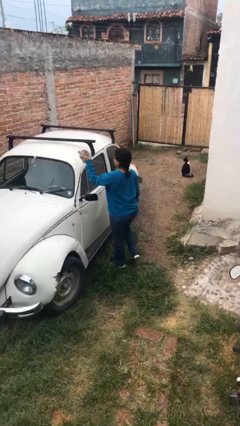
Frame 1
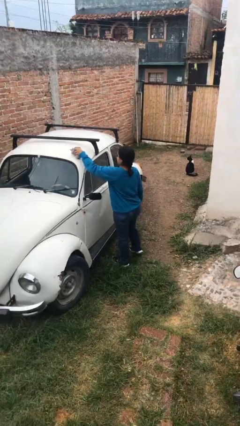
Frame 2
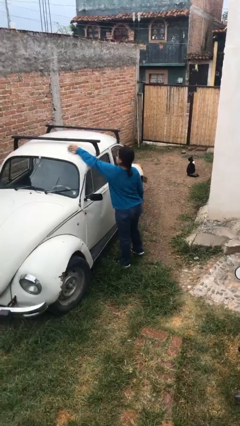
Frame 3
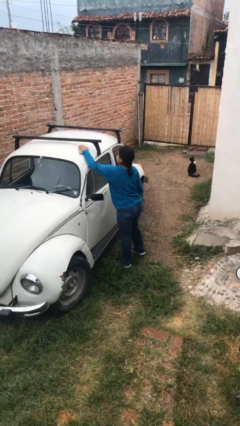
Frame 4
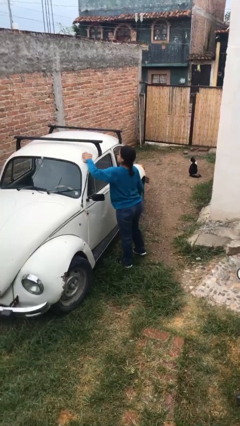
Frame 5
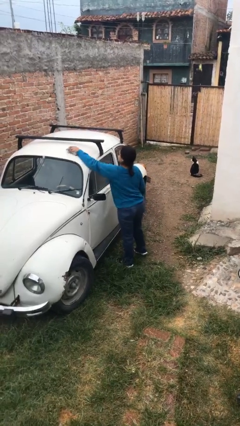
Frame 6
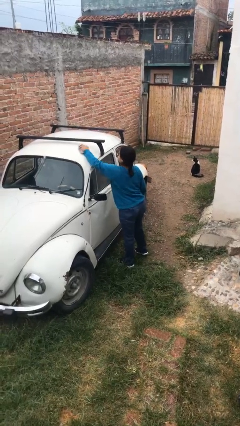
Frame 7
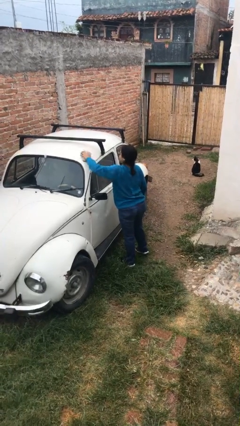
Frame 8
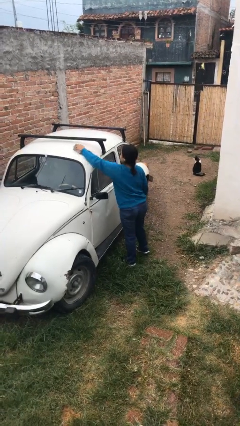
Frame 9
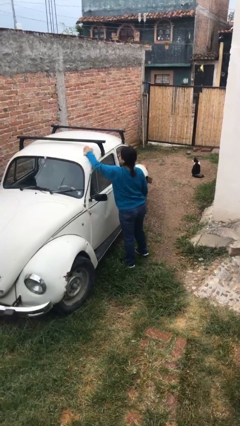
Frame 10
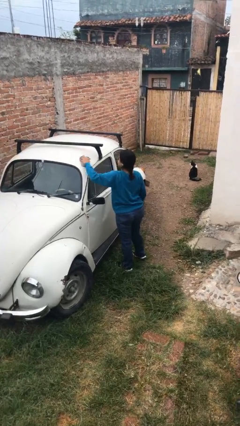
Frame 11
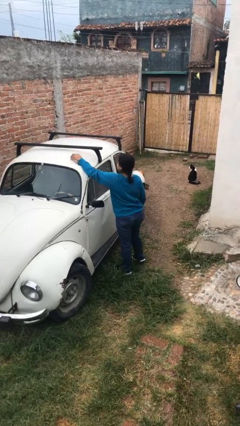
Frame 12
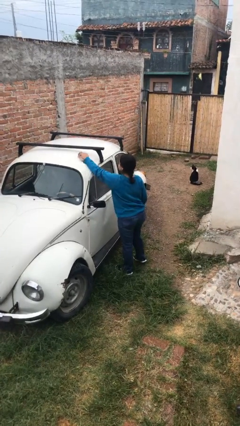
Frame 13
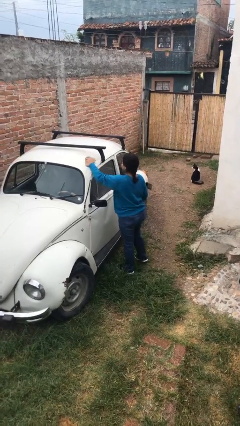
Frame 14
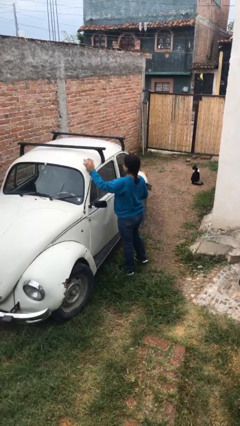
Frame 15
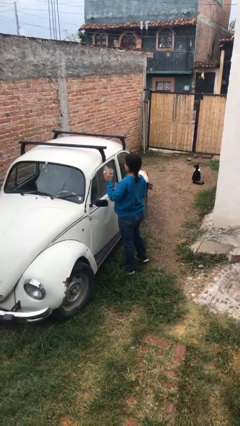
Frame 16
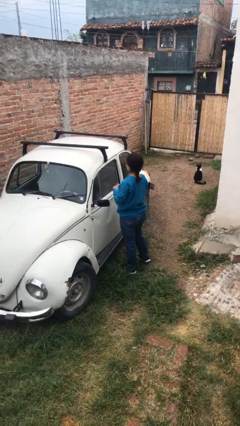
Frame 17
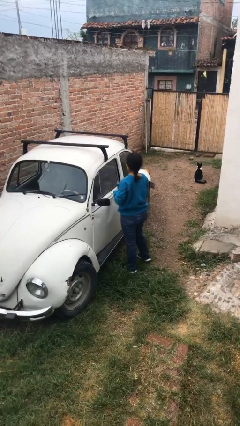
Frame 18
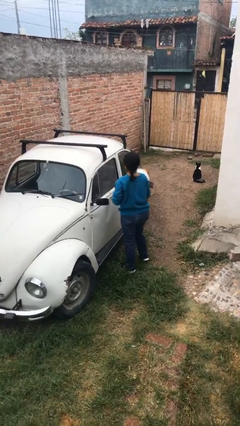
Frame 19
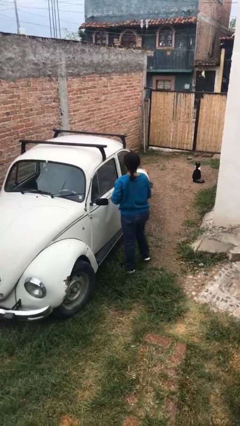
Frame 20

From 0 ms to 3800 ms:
person polishes car with rag

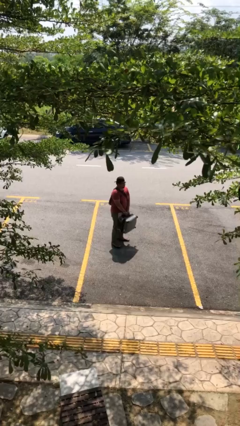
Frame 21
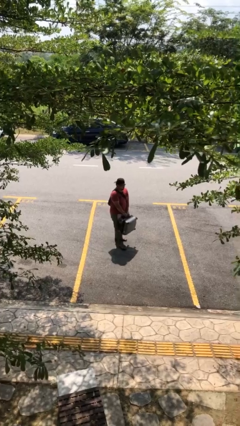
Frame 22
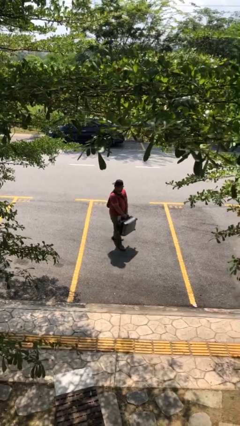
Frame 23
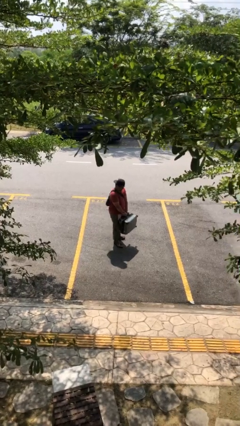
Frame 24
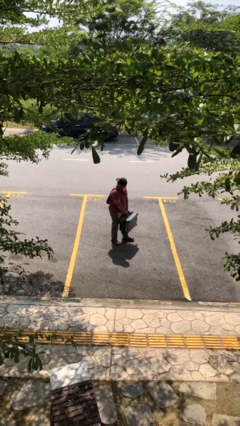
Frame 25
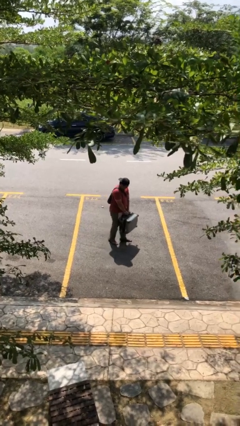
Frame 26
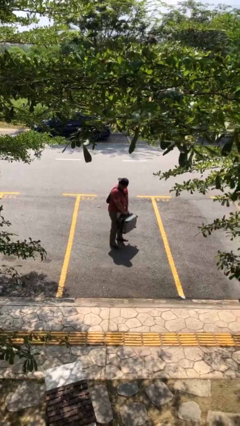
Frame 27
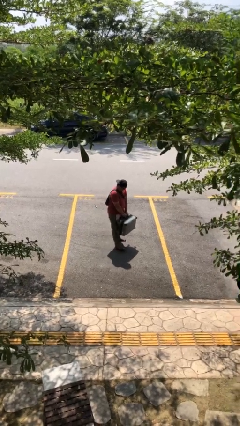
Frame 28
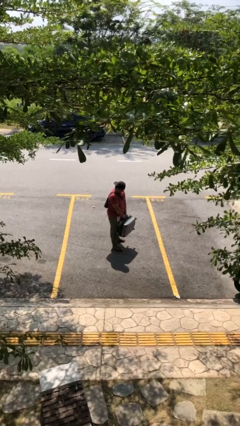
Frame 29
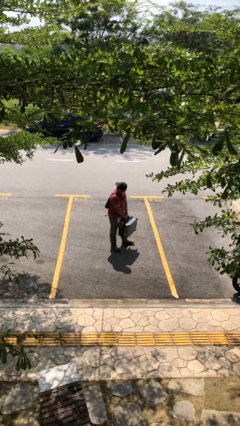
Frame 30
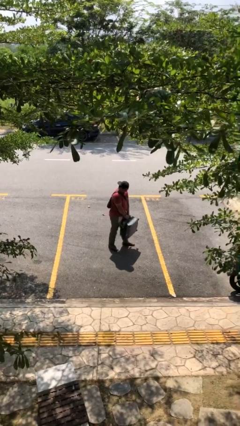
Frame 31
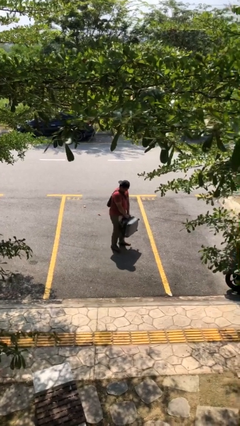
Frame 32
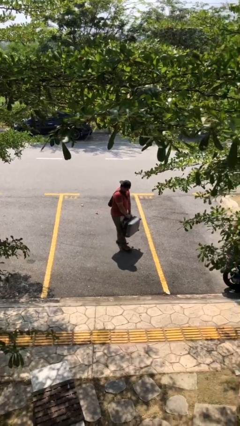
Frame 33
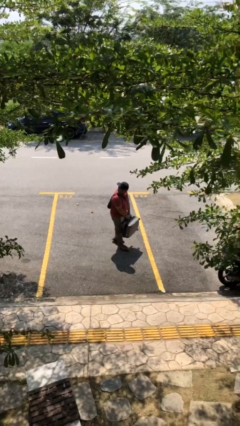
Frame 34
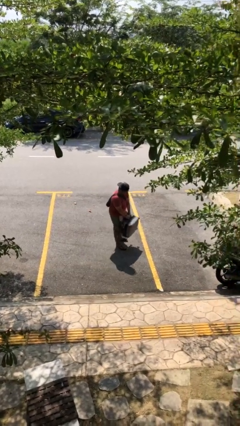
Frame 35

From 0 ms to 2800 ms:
person carries heavy object

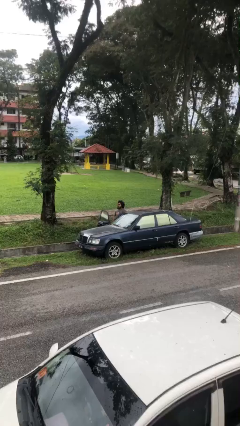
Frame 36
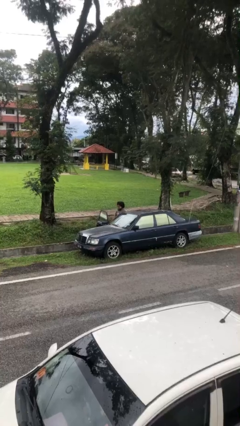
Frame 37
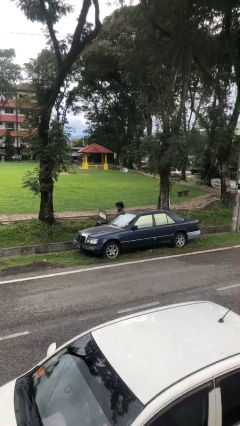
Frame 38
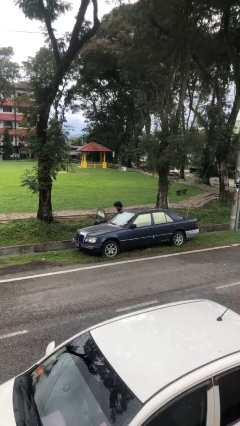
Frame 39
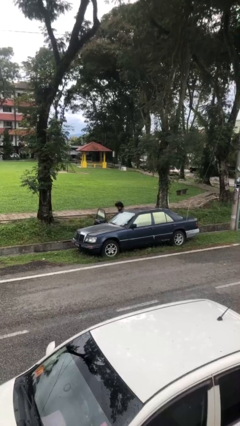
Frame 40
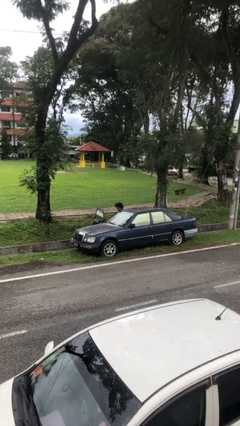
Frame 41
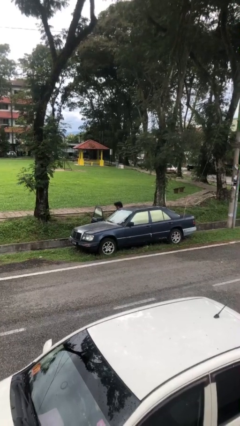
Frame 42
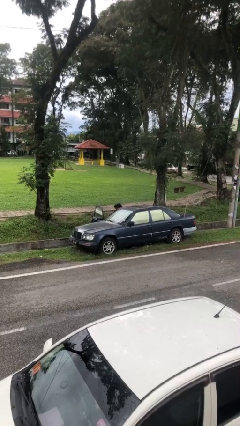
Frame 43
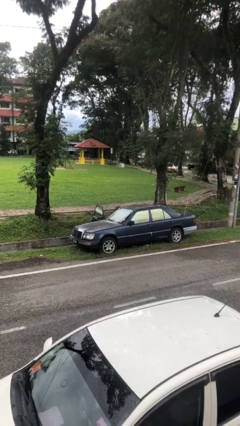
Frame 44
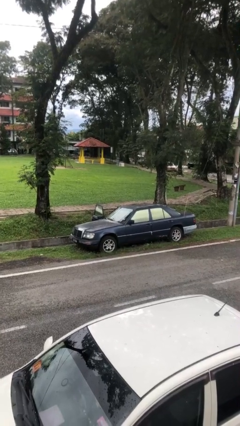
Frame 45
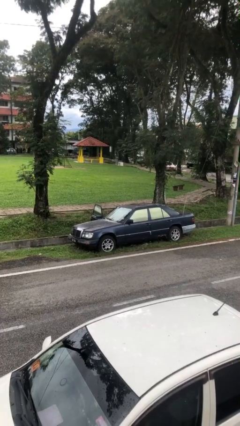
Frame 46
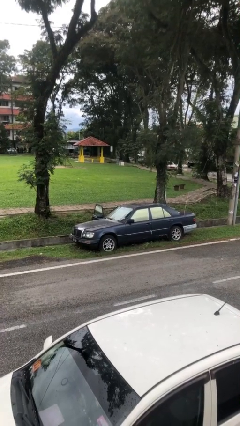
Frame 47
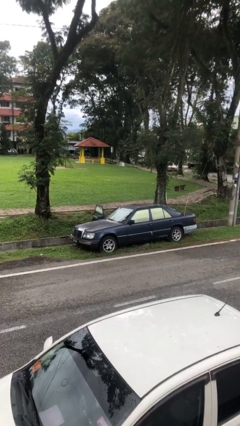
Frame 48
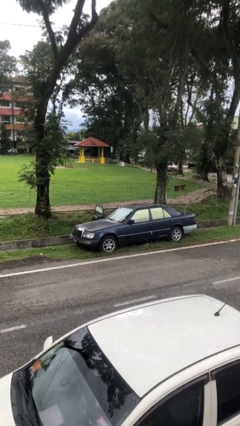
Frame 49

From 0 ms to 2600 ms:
person enters car

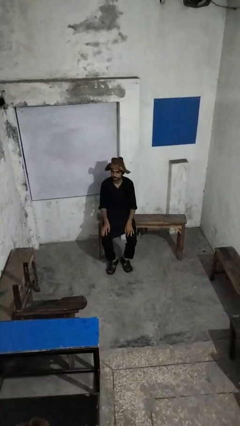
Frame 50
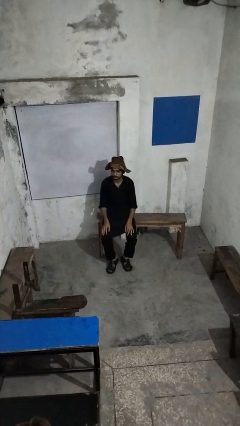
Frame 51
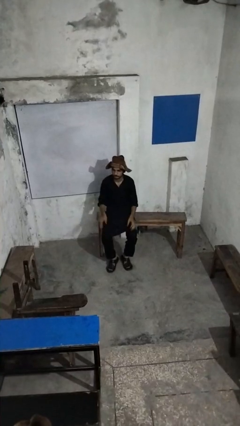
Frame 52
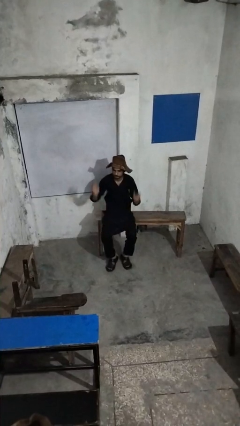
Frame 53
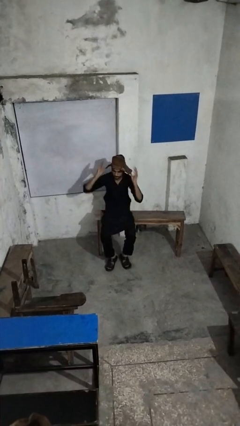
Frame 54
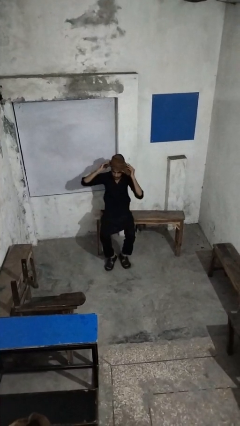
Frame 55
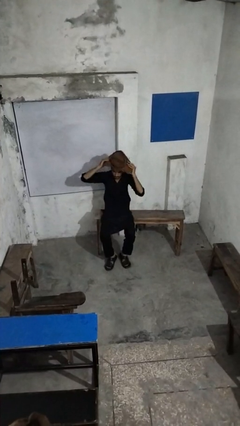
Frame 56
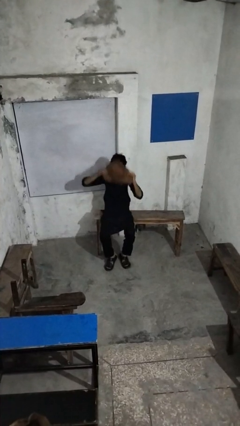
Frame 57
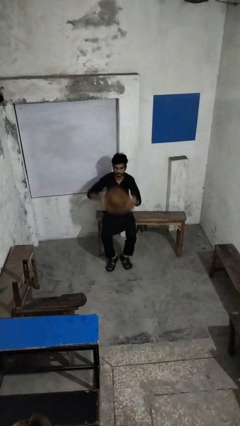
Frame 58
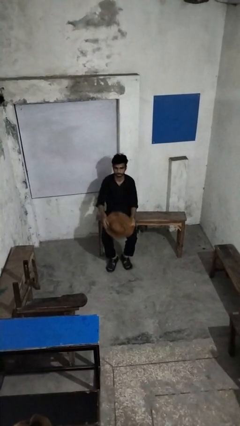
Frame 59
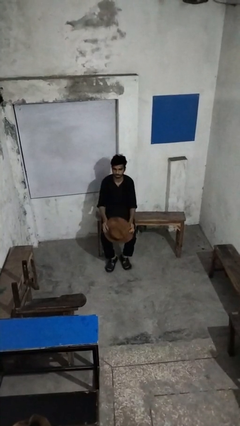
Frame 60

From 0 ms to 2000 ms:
person takes off hat

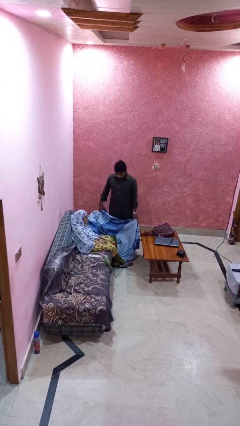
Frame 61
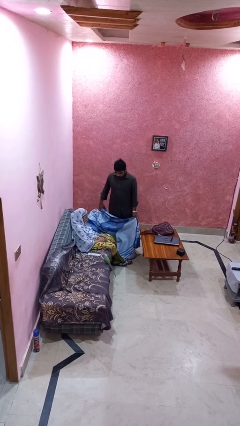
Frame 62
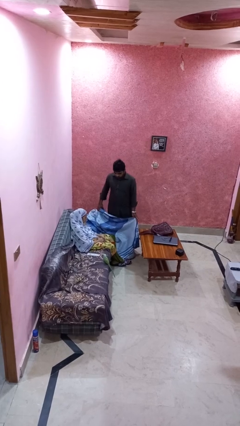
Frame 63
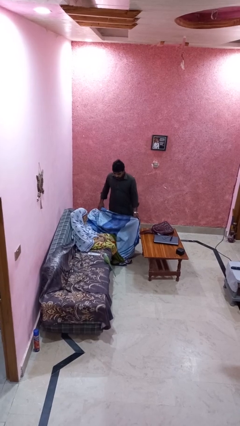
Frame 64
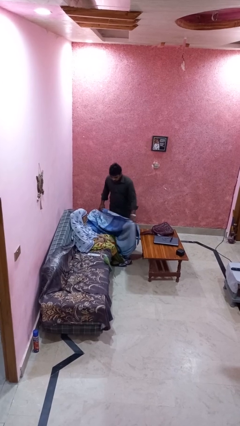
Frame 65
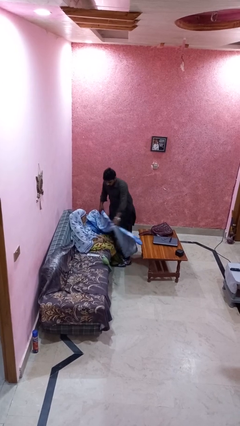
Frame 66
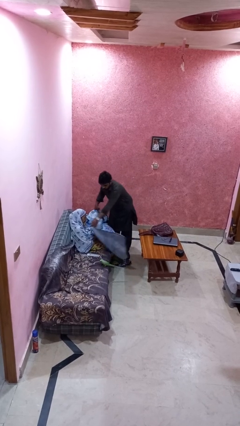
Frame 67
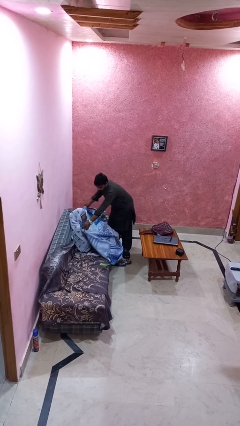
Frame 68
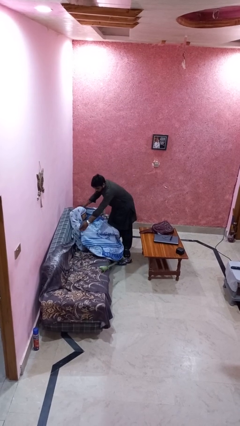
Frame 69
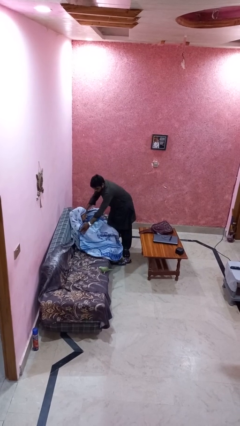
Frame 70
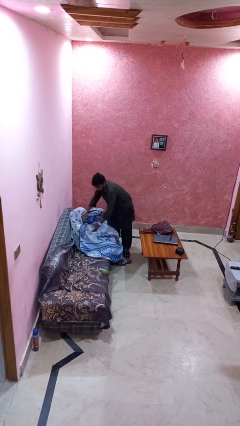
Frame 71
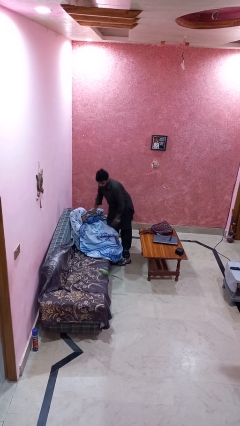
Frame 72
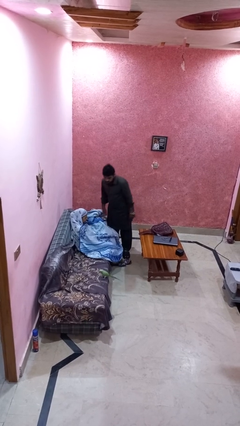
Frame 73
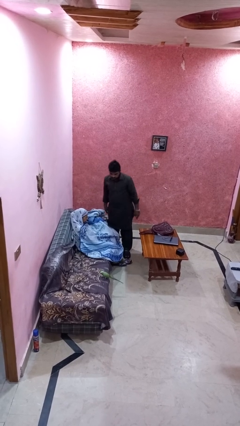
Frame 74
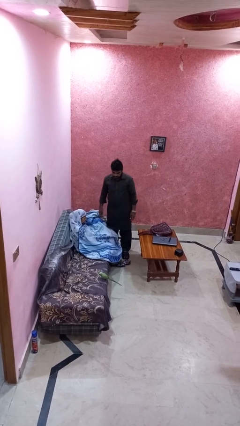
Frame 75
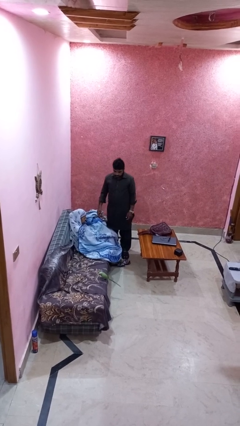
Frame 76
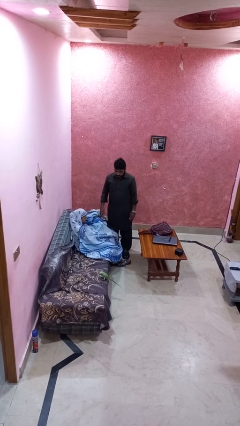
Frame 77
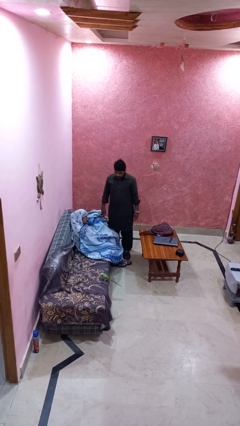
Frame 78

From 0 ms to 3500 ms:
person covers friend with blanket

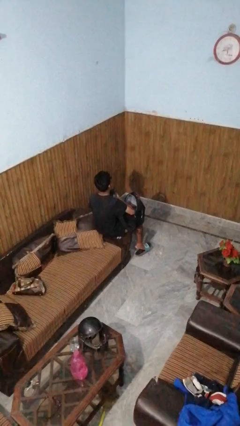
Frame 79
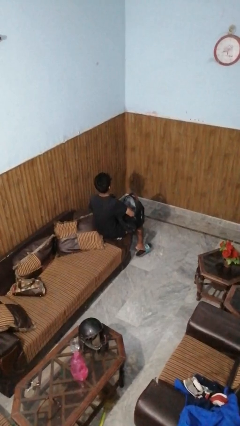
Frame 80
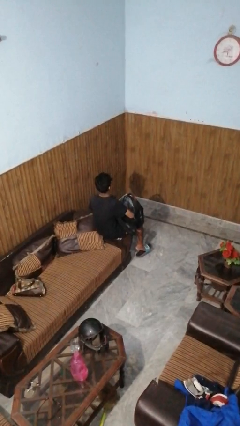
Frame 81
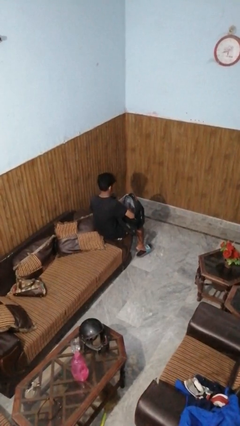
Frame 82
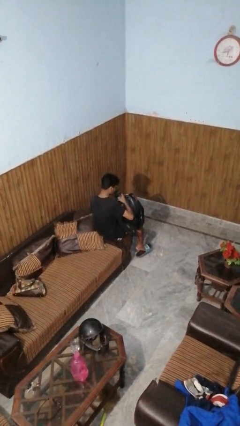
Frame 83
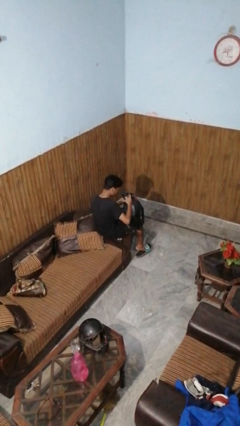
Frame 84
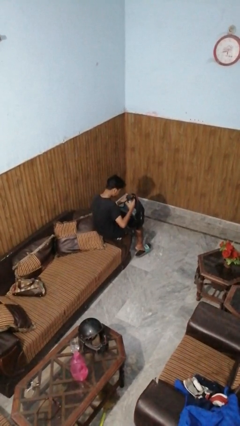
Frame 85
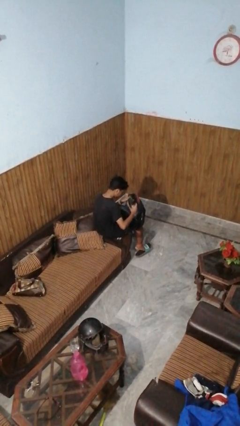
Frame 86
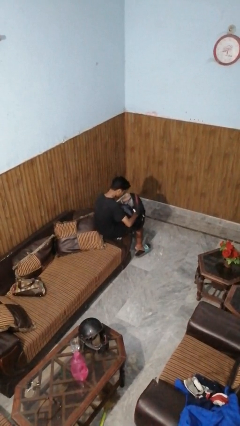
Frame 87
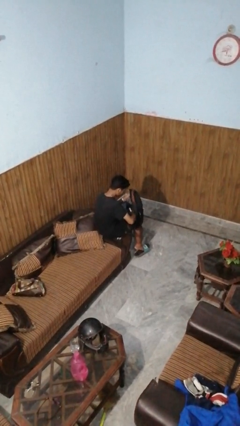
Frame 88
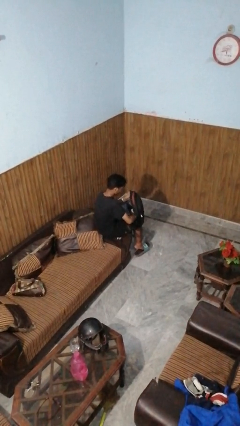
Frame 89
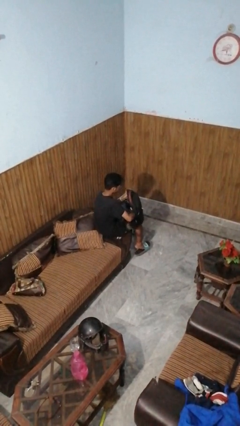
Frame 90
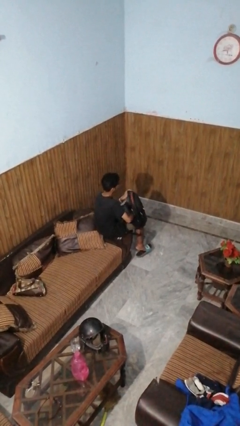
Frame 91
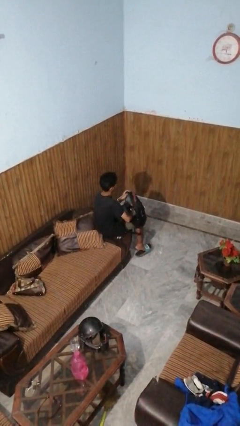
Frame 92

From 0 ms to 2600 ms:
person puts object into backpack

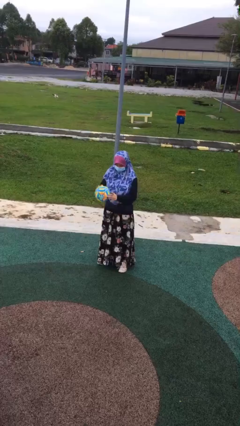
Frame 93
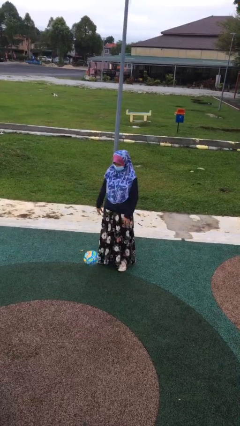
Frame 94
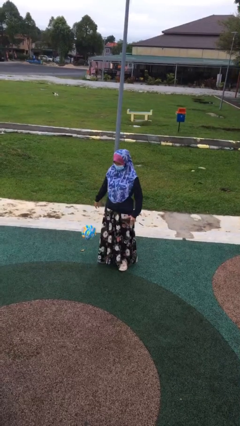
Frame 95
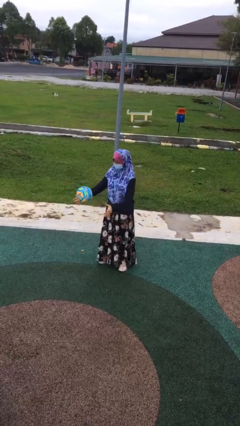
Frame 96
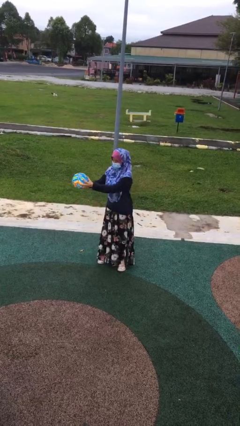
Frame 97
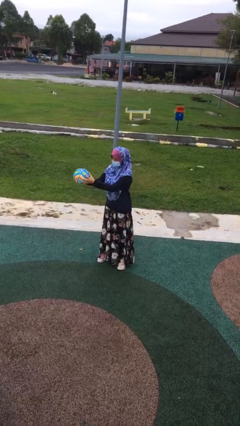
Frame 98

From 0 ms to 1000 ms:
person bounces ball on floor
